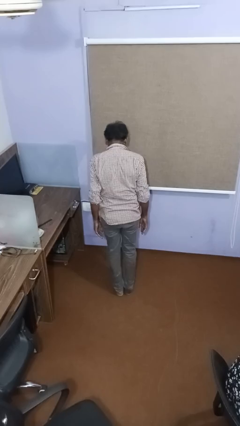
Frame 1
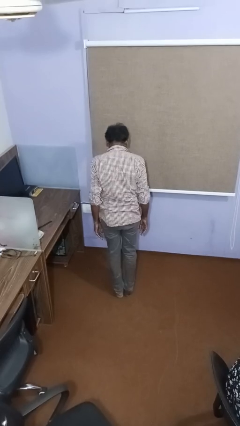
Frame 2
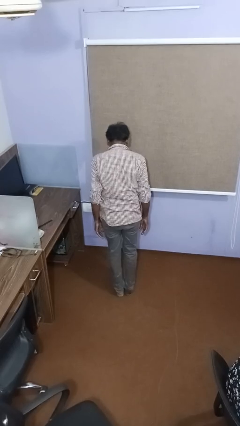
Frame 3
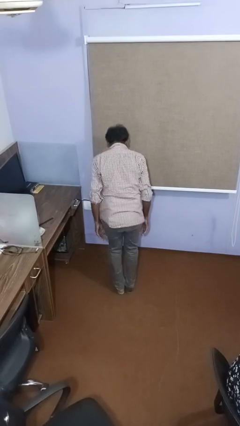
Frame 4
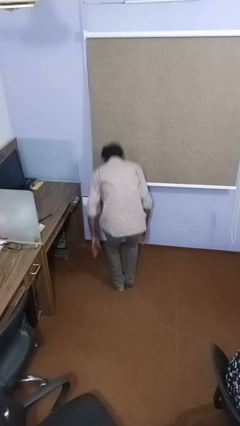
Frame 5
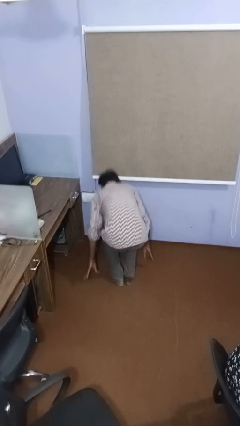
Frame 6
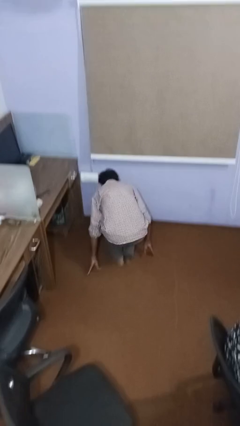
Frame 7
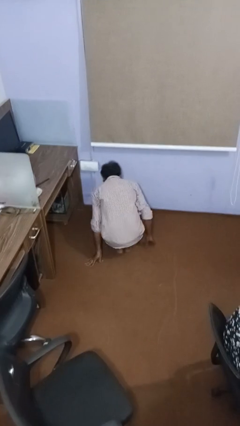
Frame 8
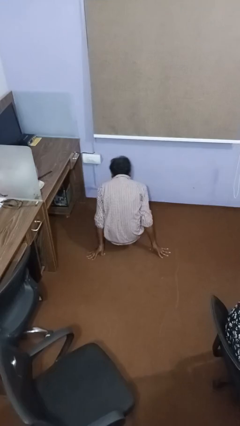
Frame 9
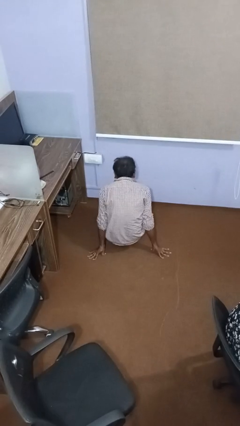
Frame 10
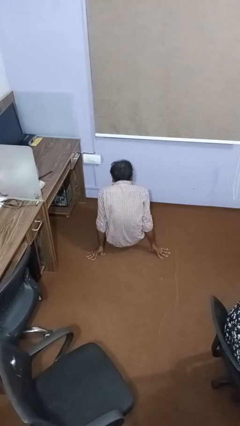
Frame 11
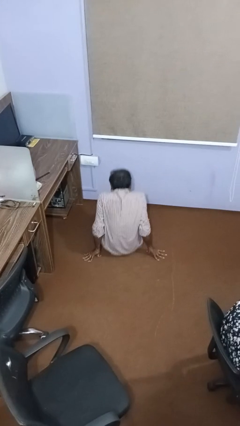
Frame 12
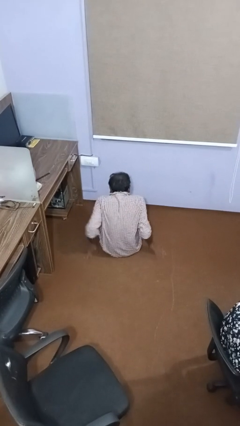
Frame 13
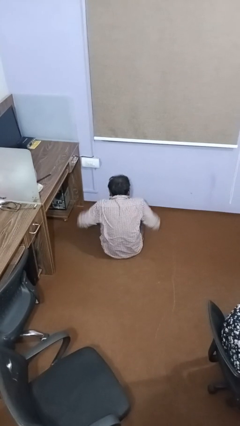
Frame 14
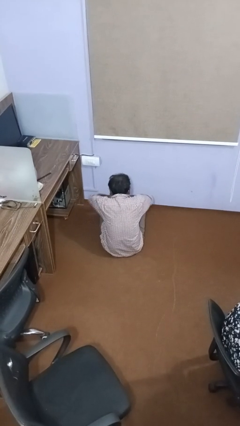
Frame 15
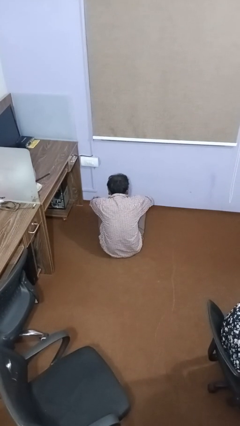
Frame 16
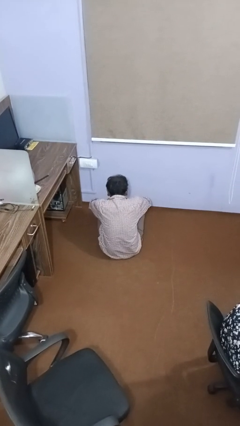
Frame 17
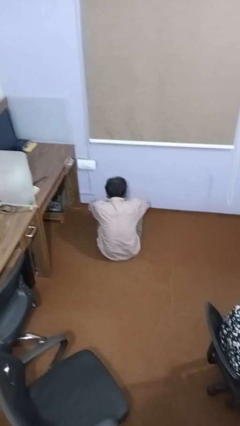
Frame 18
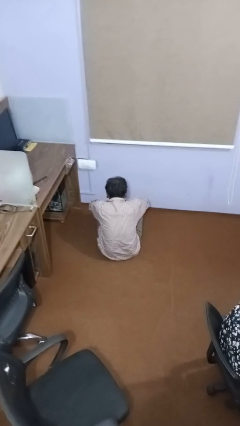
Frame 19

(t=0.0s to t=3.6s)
person crosses legs

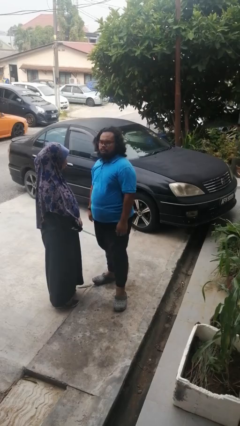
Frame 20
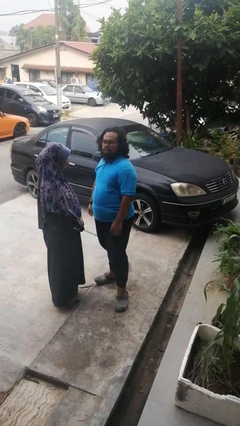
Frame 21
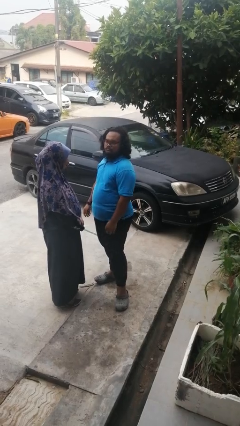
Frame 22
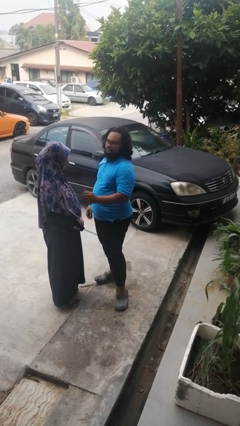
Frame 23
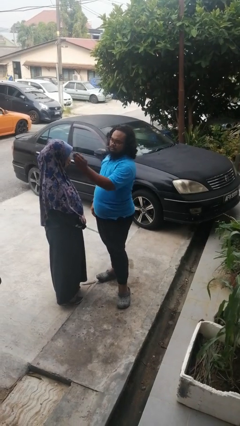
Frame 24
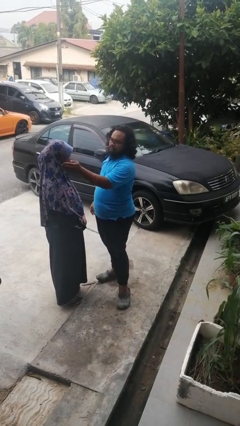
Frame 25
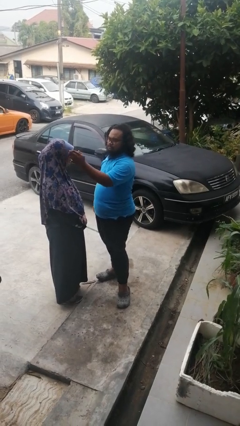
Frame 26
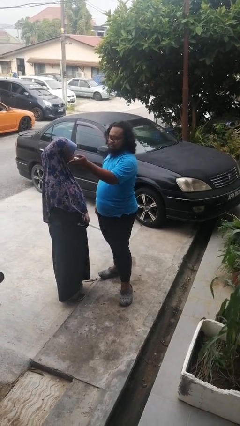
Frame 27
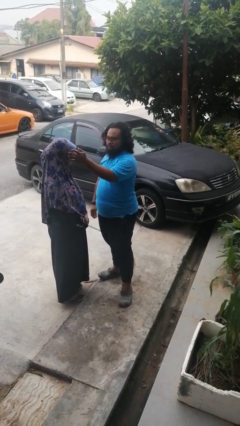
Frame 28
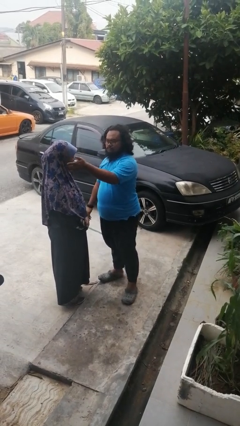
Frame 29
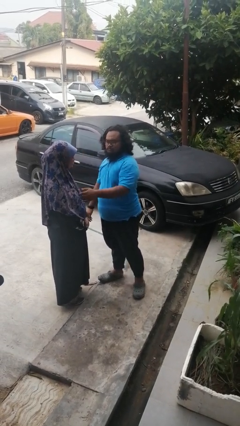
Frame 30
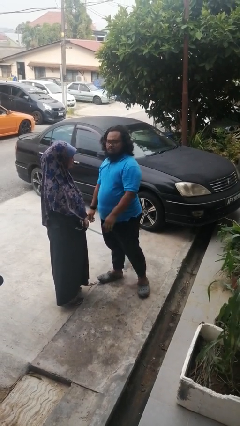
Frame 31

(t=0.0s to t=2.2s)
person touches face of person

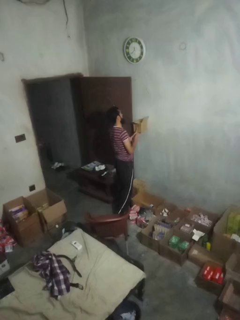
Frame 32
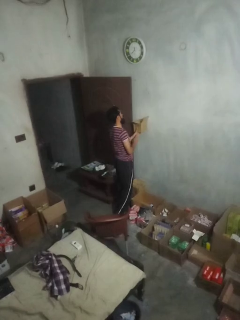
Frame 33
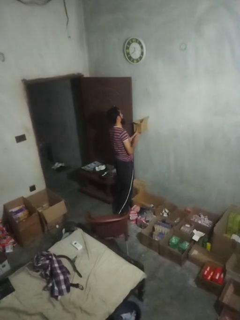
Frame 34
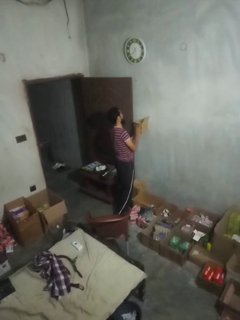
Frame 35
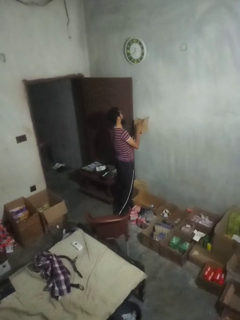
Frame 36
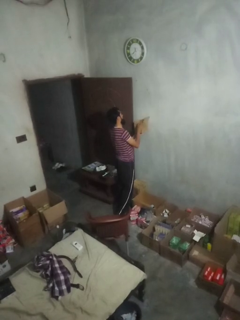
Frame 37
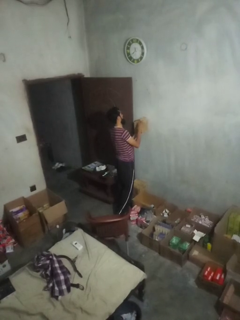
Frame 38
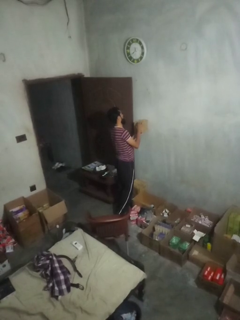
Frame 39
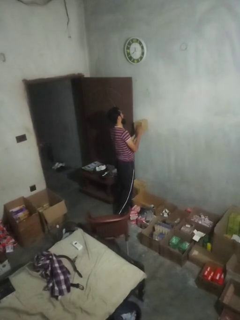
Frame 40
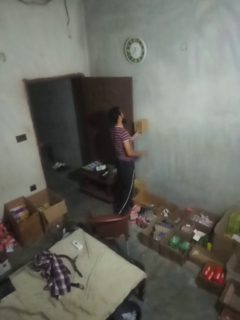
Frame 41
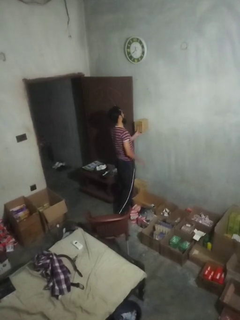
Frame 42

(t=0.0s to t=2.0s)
person closes mailbox

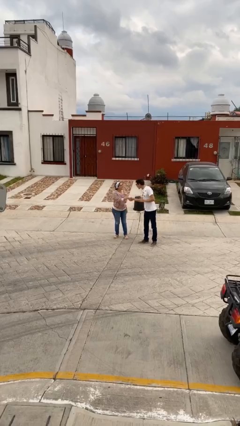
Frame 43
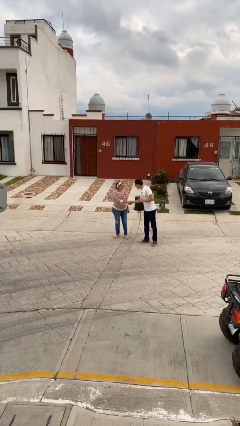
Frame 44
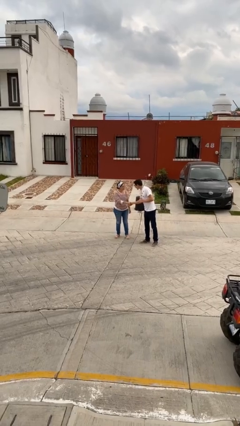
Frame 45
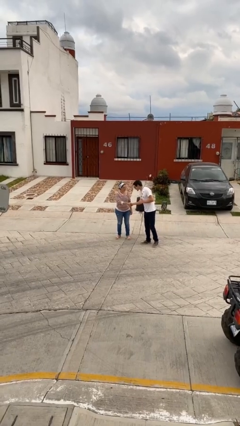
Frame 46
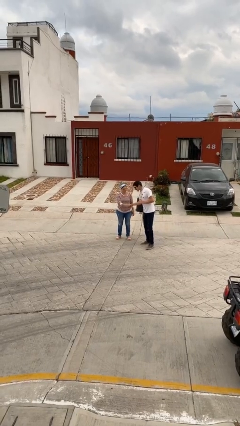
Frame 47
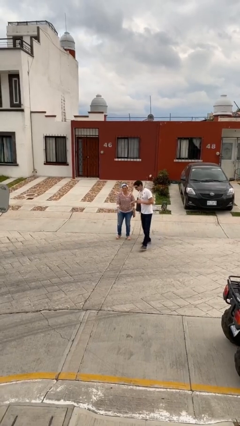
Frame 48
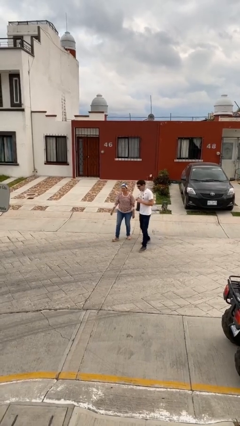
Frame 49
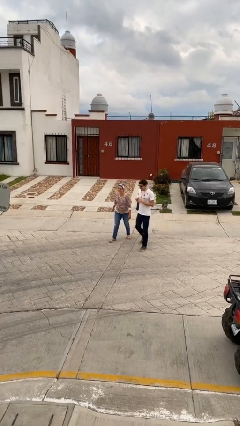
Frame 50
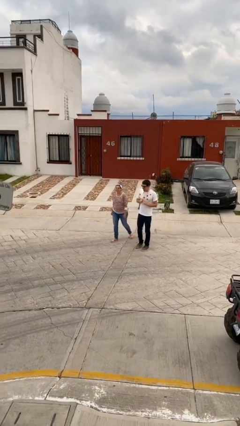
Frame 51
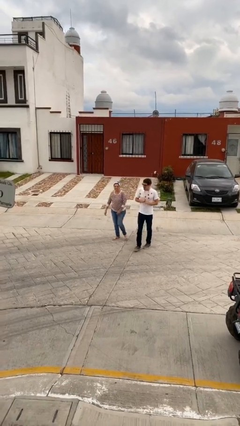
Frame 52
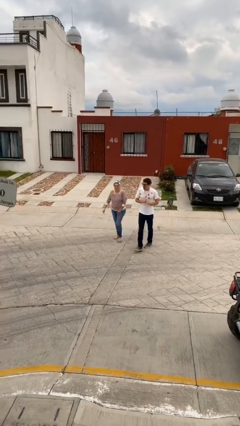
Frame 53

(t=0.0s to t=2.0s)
person shakes hand

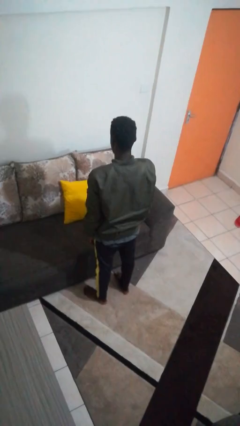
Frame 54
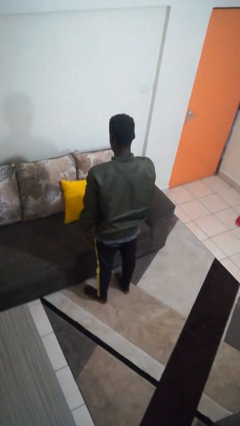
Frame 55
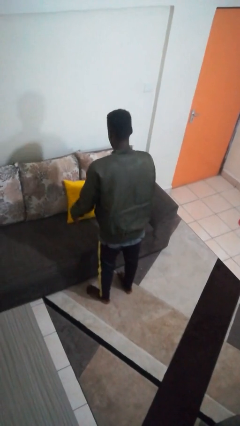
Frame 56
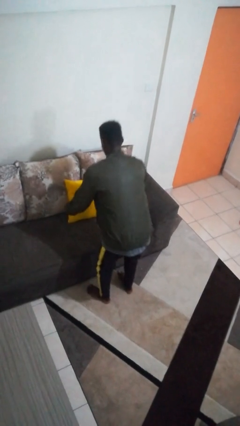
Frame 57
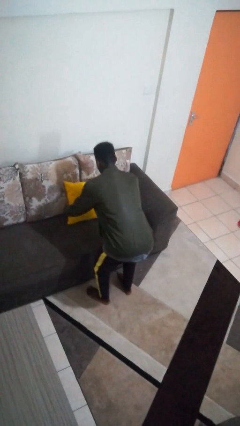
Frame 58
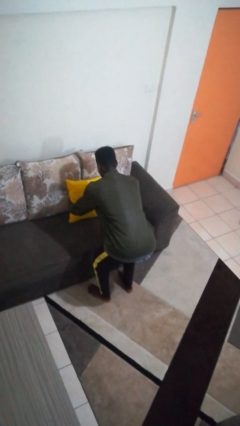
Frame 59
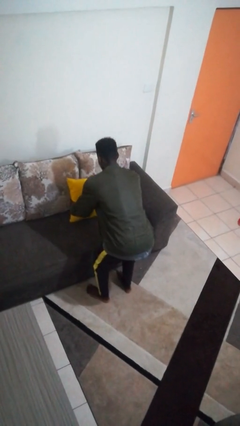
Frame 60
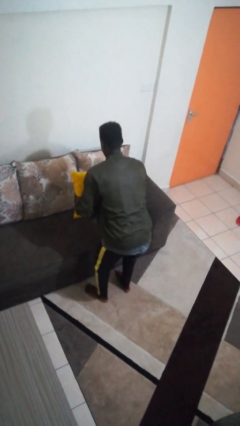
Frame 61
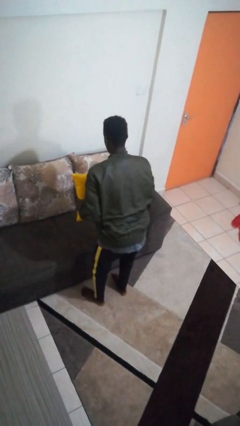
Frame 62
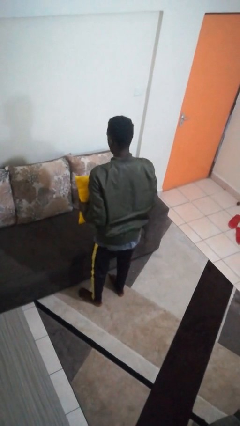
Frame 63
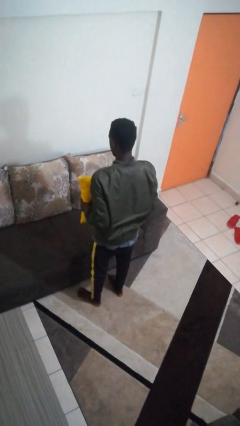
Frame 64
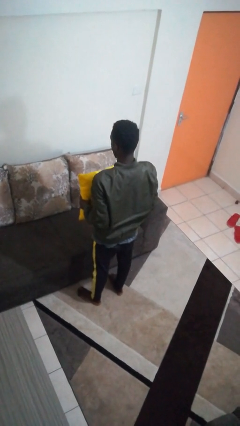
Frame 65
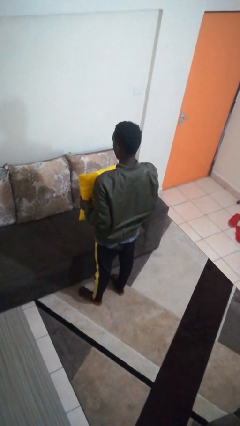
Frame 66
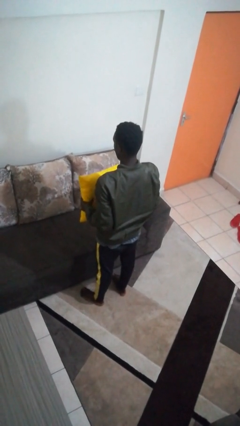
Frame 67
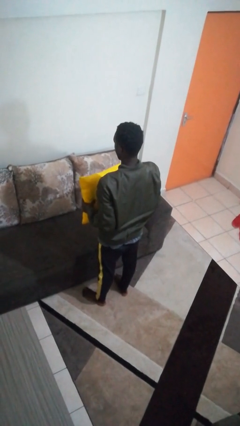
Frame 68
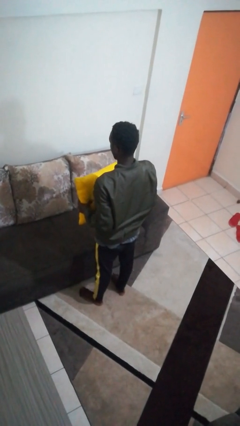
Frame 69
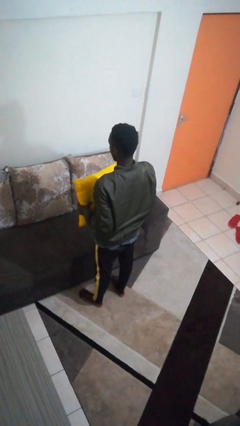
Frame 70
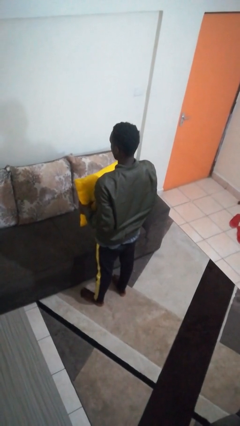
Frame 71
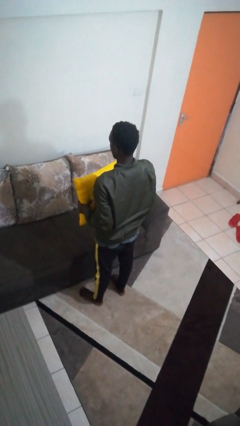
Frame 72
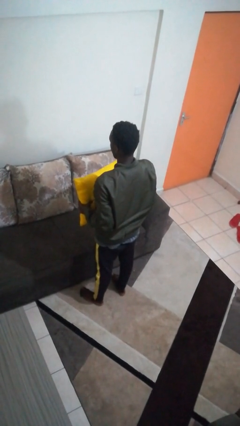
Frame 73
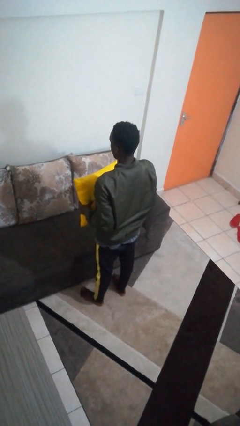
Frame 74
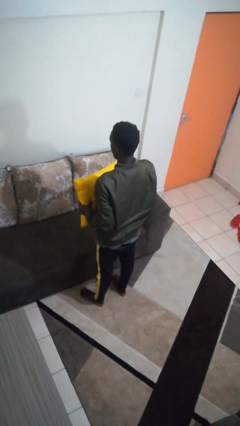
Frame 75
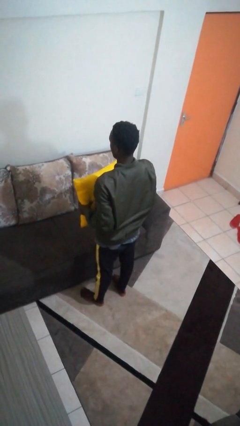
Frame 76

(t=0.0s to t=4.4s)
person picks up object from couch

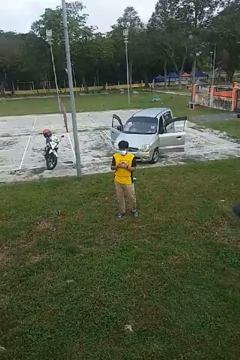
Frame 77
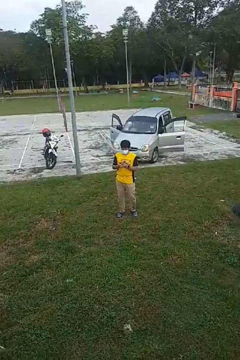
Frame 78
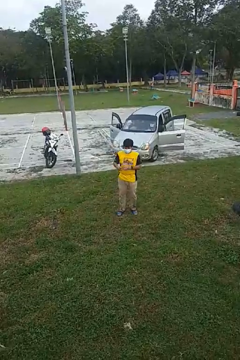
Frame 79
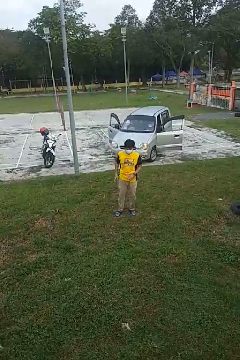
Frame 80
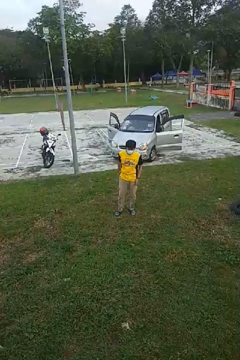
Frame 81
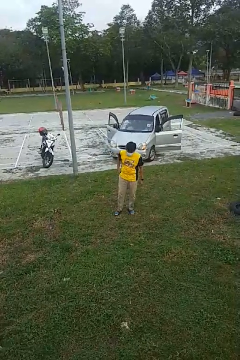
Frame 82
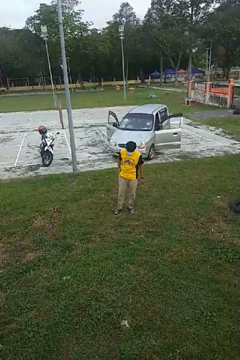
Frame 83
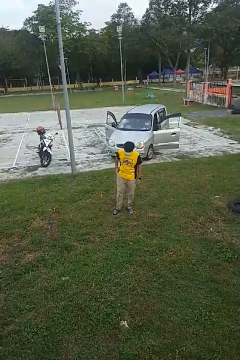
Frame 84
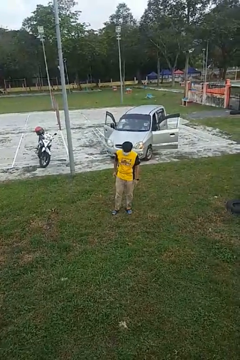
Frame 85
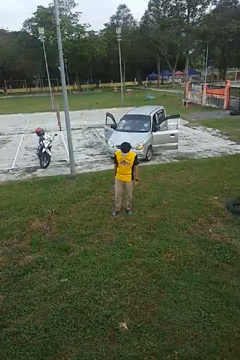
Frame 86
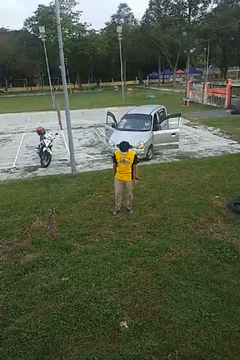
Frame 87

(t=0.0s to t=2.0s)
person puts phone into pocket

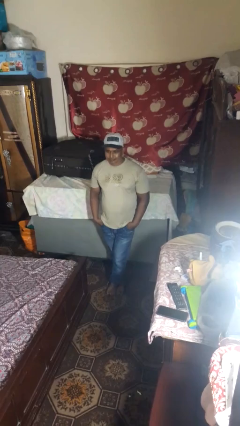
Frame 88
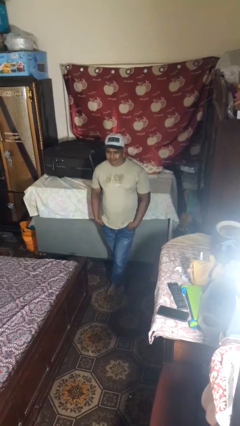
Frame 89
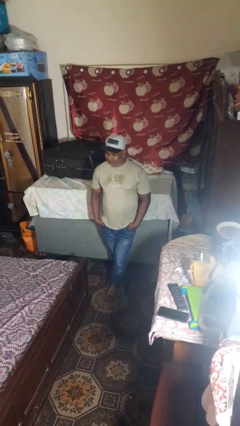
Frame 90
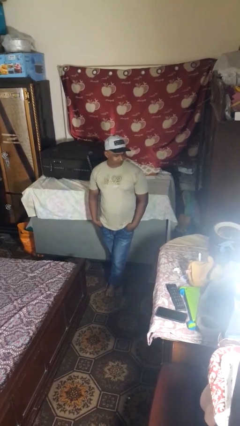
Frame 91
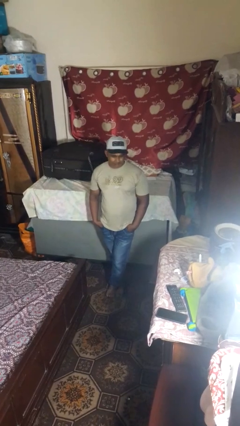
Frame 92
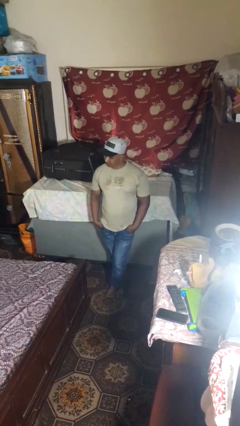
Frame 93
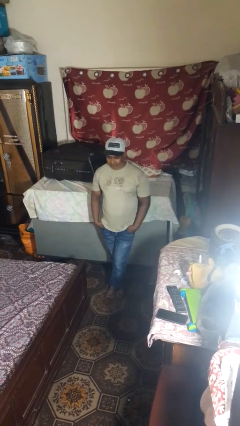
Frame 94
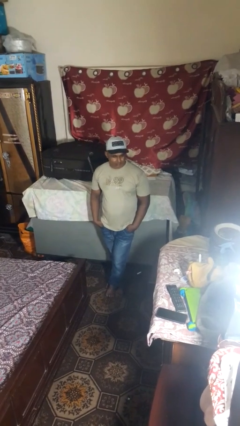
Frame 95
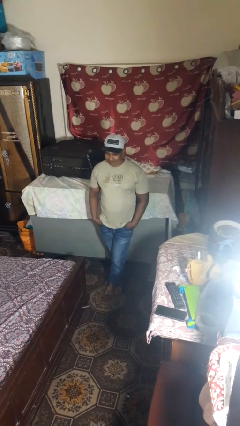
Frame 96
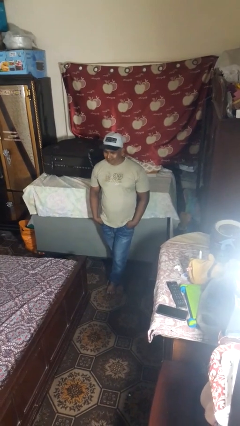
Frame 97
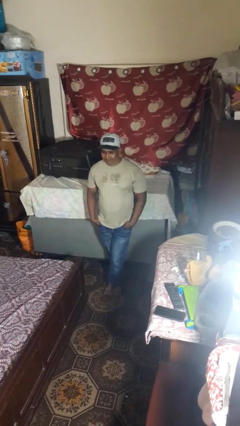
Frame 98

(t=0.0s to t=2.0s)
person shakes head
